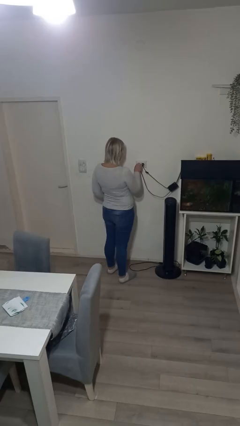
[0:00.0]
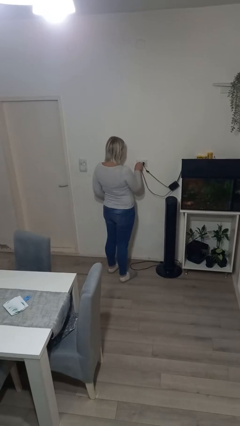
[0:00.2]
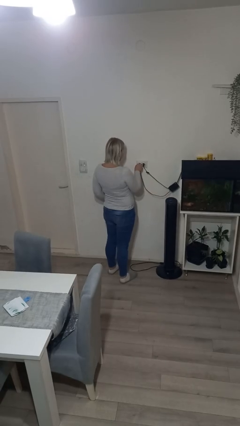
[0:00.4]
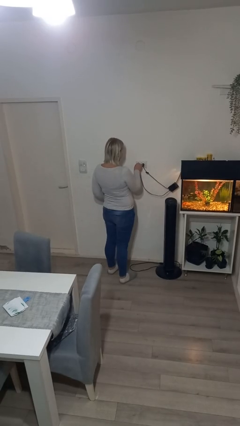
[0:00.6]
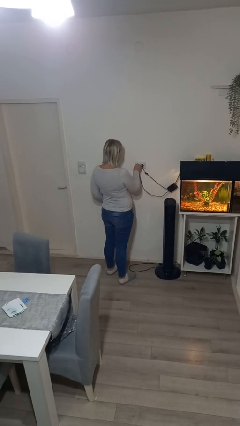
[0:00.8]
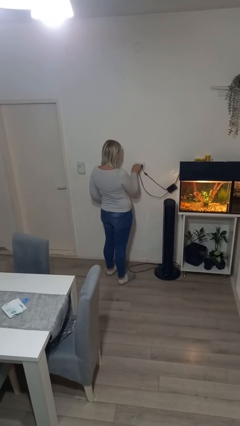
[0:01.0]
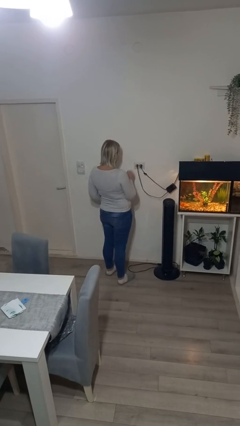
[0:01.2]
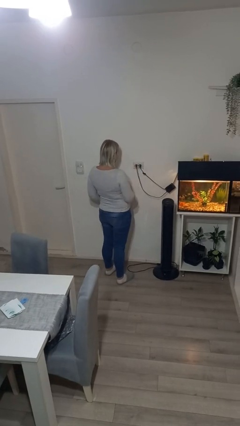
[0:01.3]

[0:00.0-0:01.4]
person plugs into electrical socket

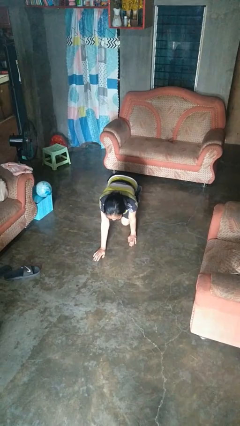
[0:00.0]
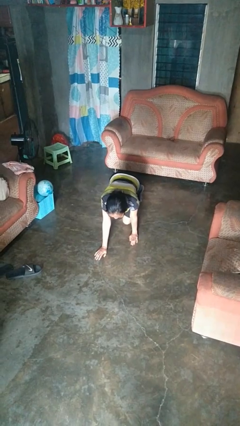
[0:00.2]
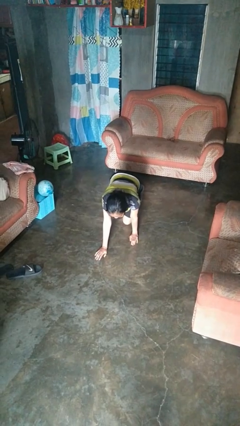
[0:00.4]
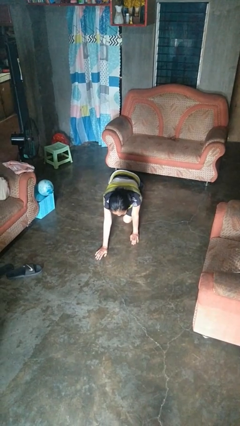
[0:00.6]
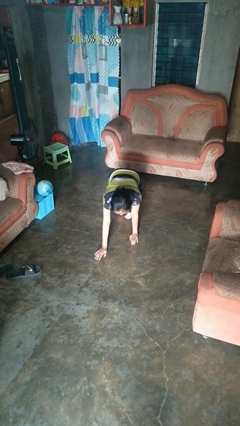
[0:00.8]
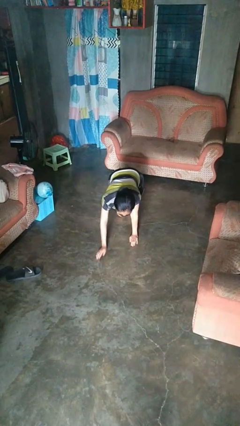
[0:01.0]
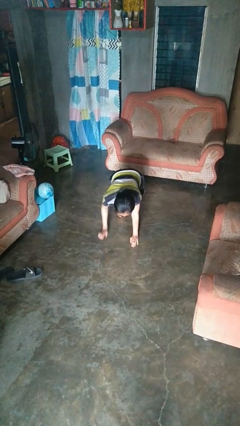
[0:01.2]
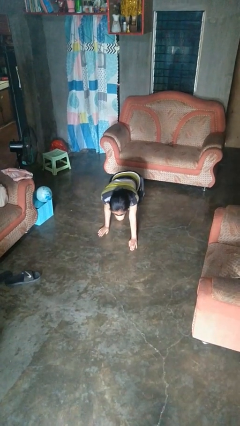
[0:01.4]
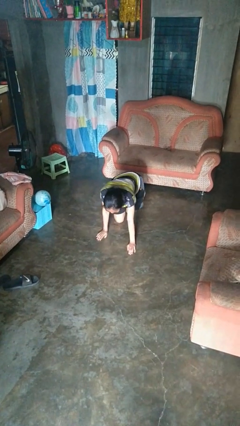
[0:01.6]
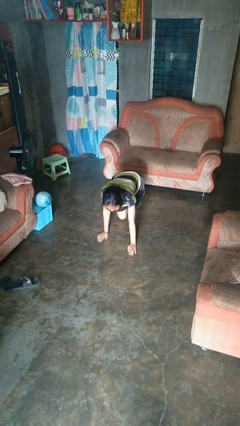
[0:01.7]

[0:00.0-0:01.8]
person crawls

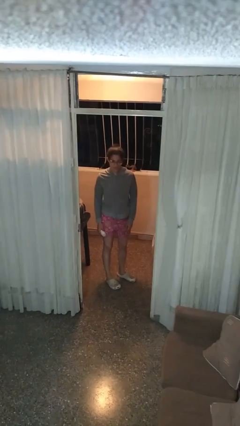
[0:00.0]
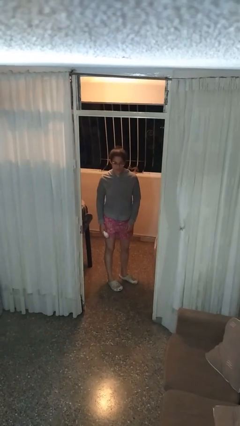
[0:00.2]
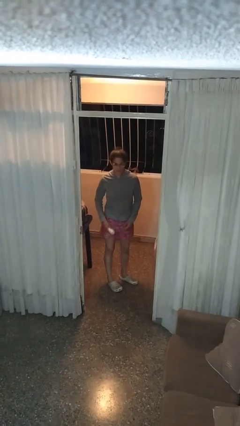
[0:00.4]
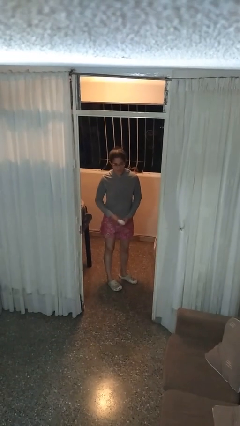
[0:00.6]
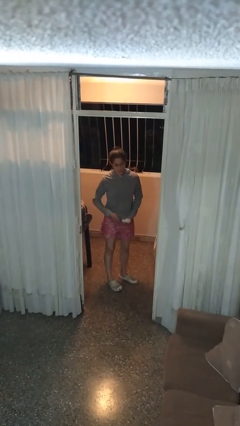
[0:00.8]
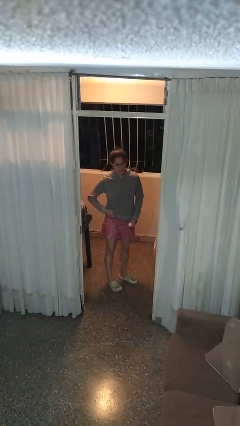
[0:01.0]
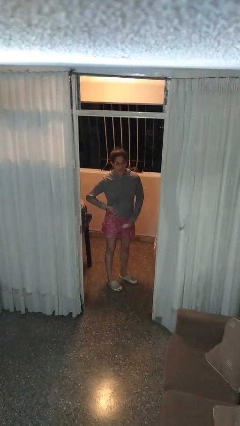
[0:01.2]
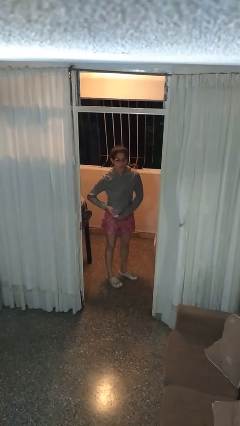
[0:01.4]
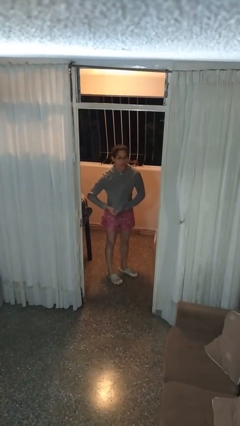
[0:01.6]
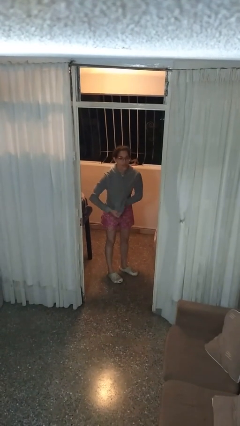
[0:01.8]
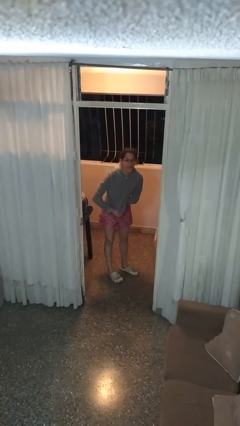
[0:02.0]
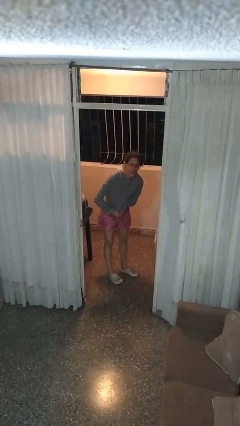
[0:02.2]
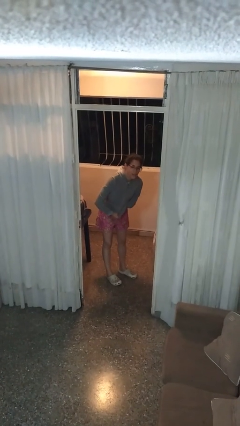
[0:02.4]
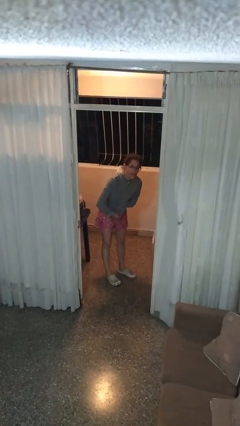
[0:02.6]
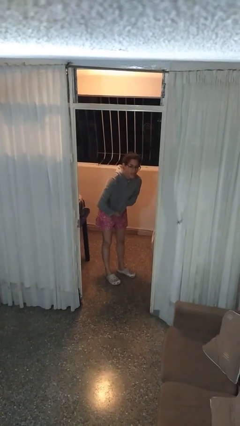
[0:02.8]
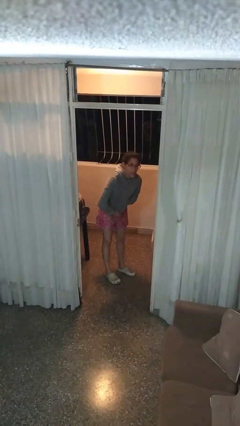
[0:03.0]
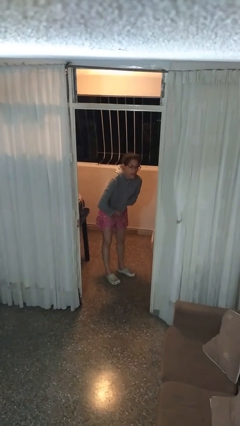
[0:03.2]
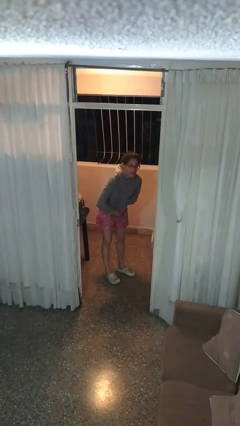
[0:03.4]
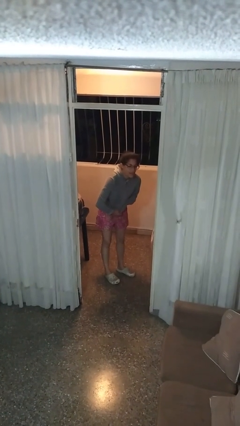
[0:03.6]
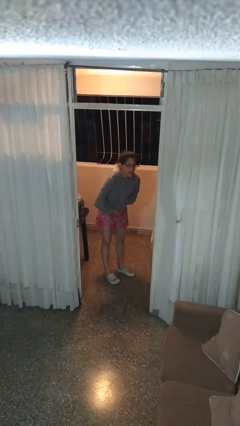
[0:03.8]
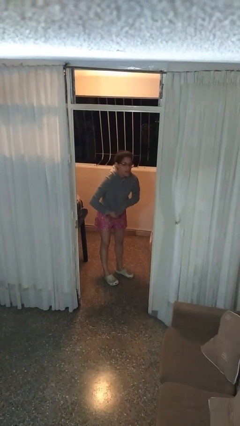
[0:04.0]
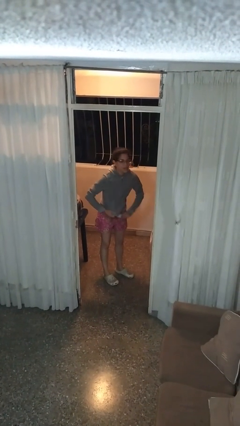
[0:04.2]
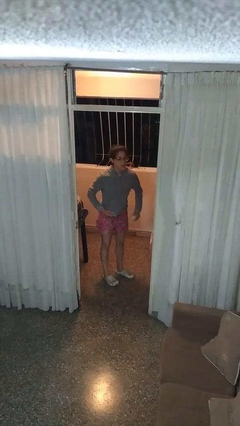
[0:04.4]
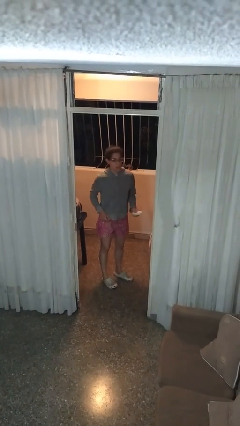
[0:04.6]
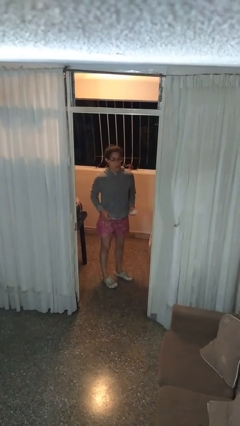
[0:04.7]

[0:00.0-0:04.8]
person applies deodorant

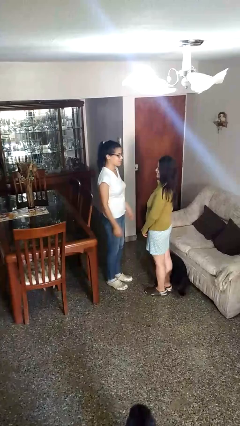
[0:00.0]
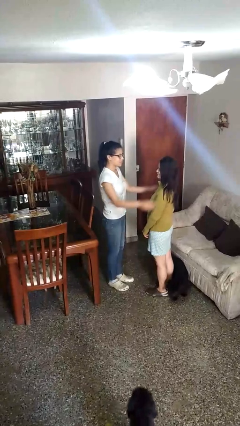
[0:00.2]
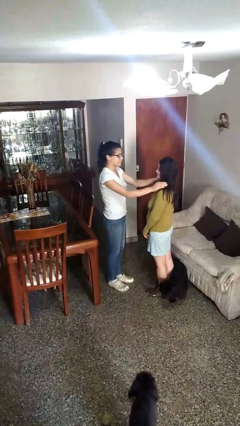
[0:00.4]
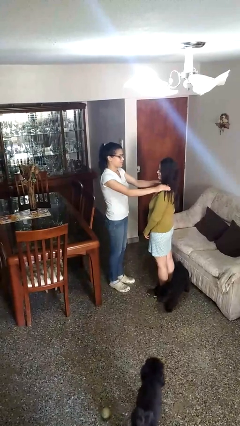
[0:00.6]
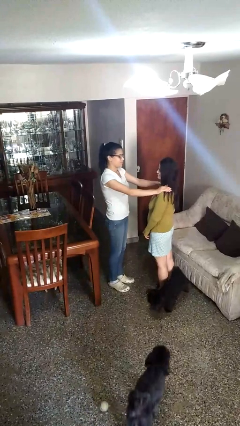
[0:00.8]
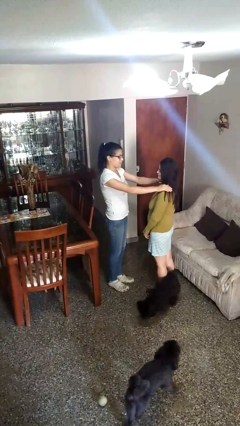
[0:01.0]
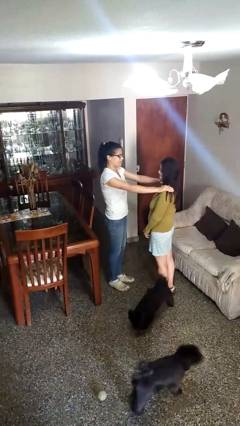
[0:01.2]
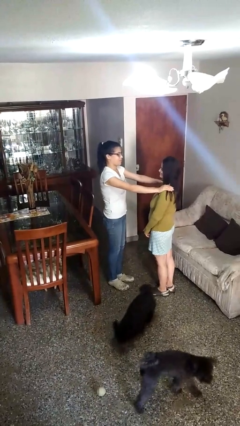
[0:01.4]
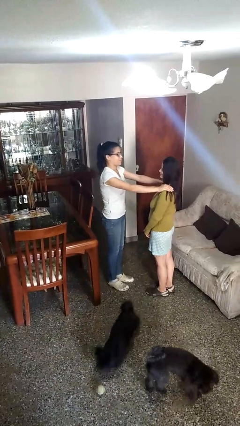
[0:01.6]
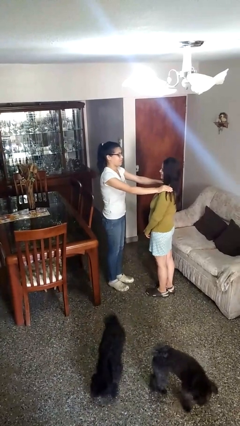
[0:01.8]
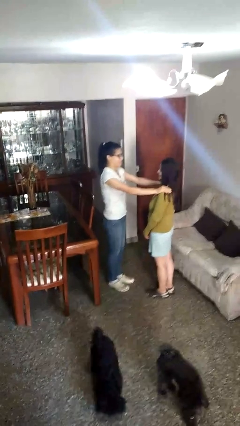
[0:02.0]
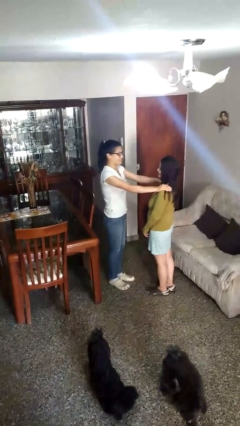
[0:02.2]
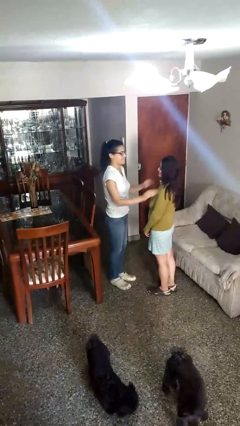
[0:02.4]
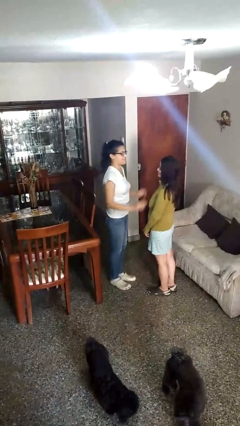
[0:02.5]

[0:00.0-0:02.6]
person pounds shoulders of person

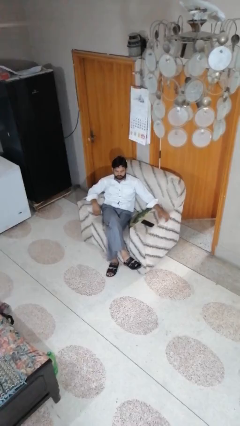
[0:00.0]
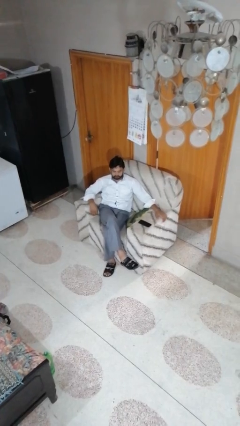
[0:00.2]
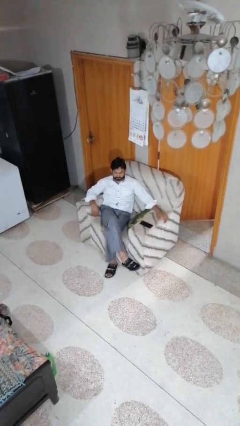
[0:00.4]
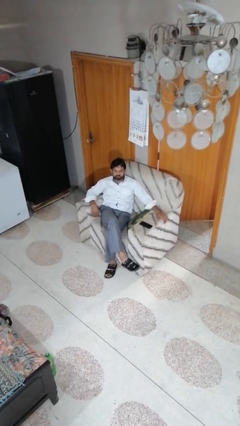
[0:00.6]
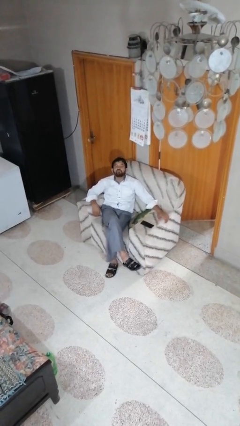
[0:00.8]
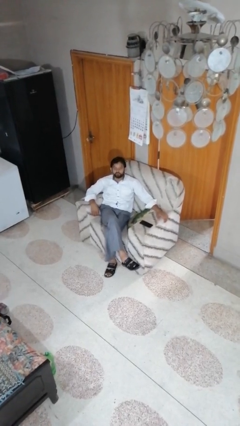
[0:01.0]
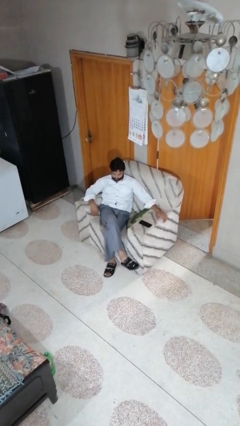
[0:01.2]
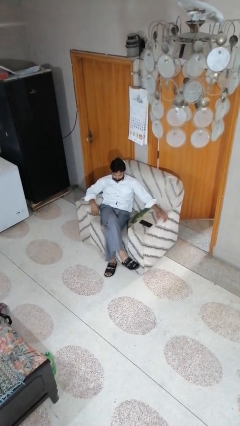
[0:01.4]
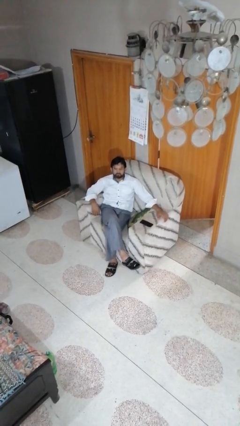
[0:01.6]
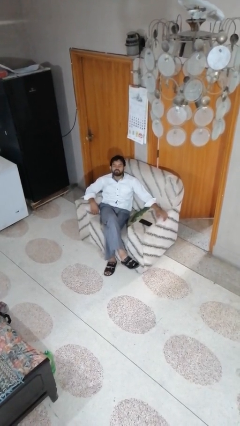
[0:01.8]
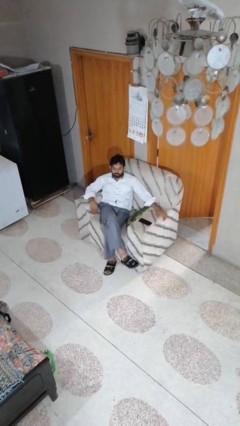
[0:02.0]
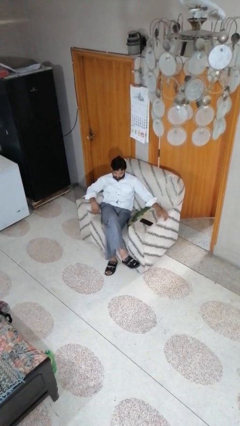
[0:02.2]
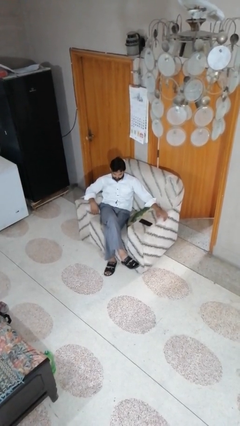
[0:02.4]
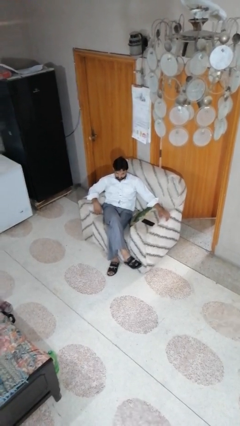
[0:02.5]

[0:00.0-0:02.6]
person nods head

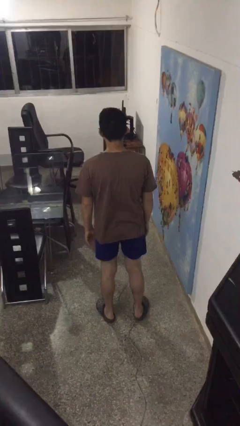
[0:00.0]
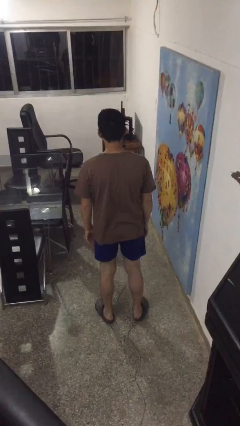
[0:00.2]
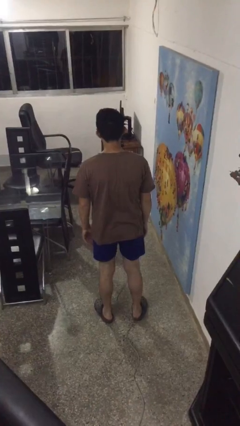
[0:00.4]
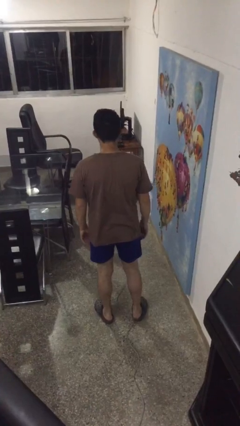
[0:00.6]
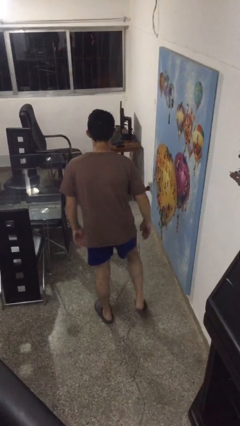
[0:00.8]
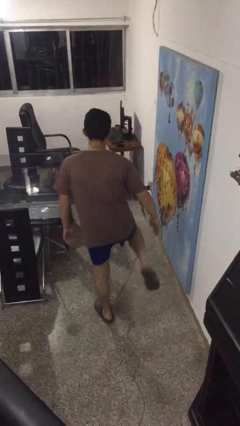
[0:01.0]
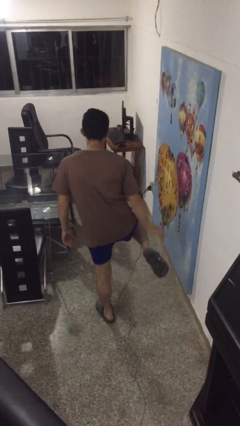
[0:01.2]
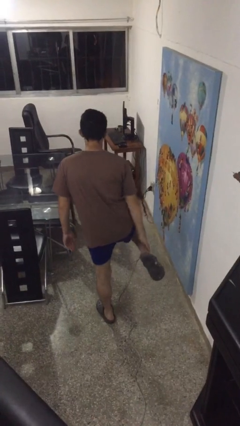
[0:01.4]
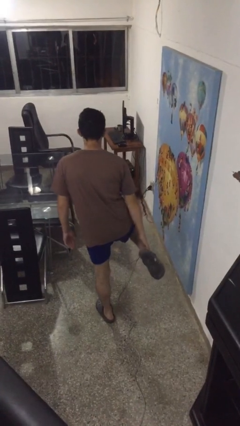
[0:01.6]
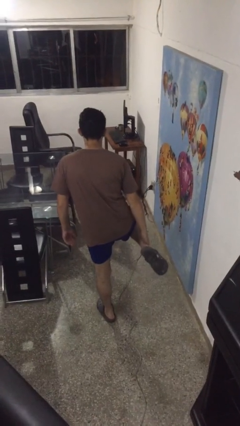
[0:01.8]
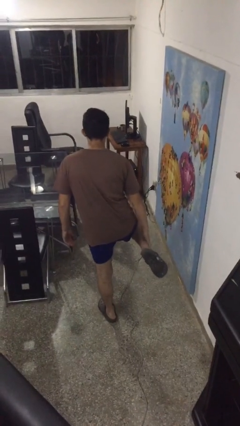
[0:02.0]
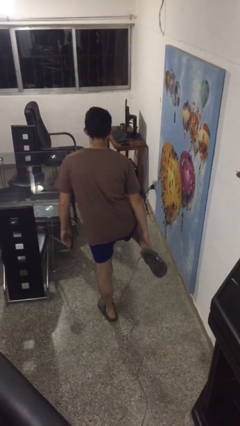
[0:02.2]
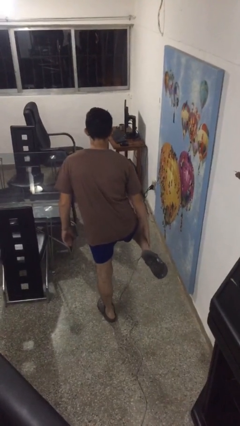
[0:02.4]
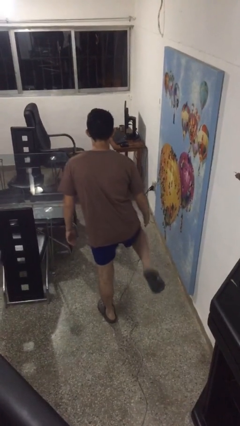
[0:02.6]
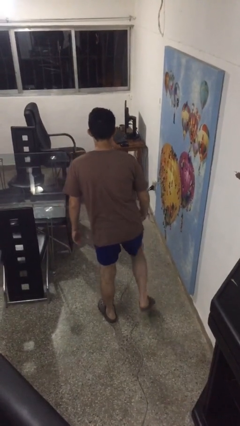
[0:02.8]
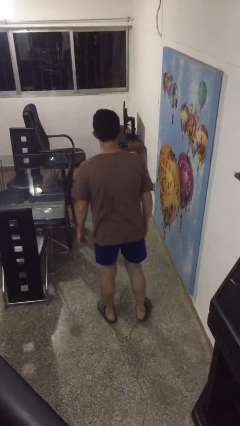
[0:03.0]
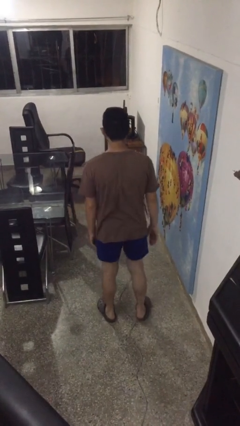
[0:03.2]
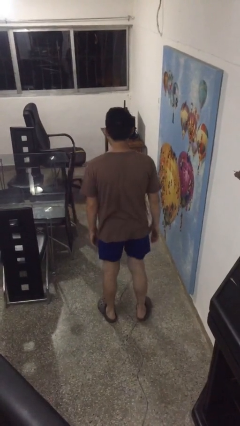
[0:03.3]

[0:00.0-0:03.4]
person swats bug

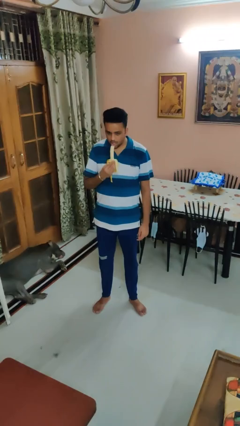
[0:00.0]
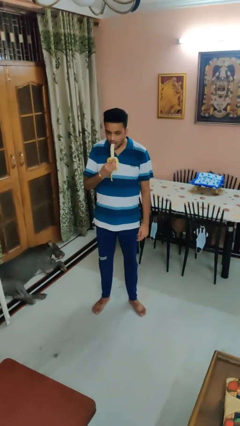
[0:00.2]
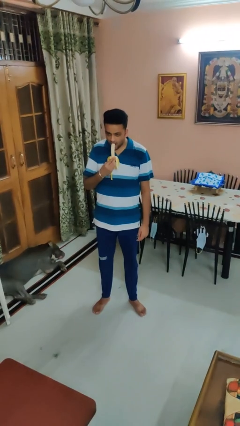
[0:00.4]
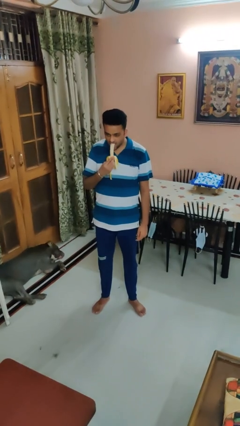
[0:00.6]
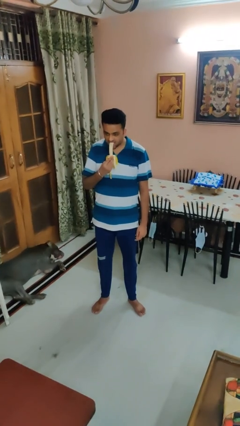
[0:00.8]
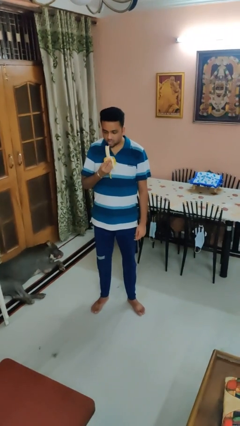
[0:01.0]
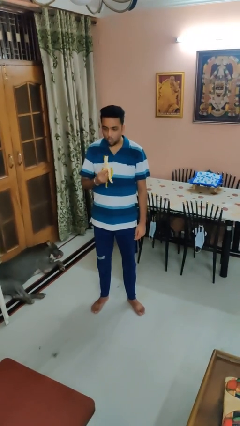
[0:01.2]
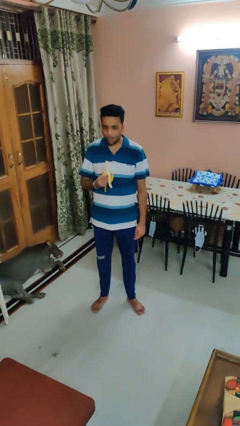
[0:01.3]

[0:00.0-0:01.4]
person eats banana
